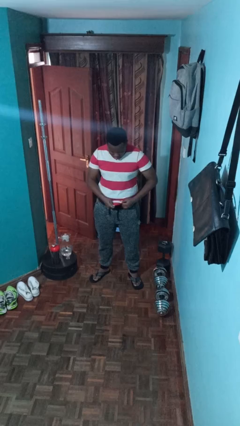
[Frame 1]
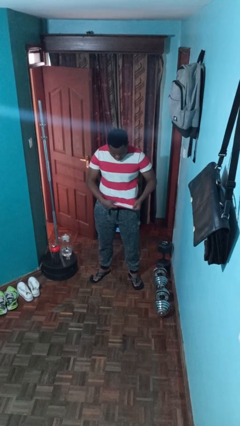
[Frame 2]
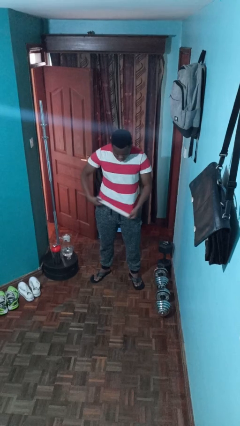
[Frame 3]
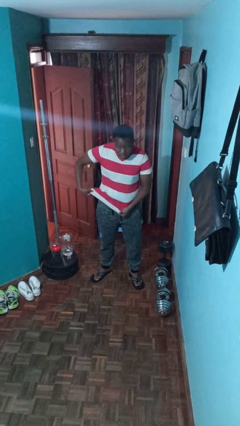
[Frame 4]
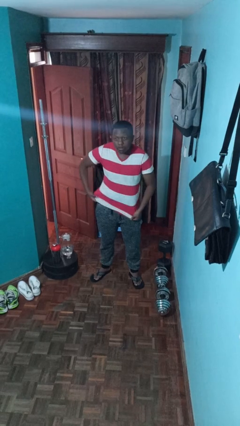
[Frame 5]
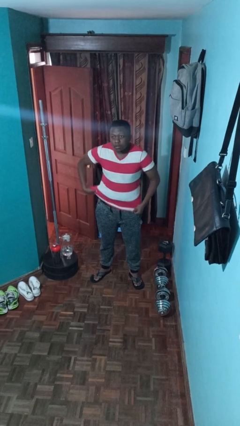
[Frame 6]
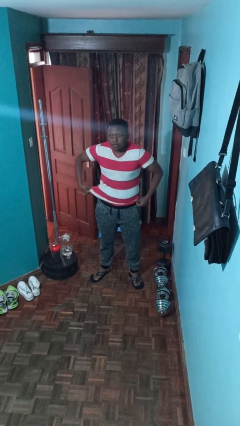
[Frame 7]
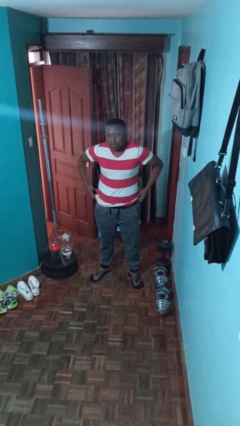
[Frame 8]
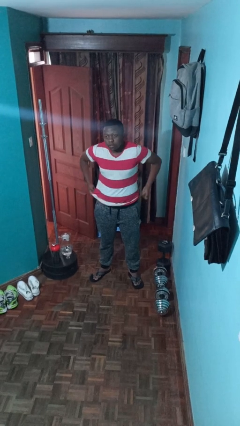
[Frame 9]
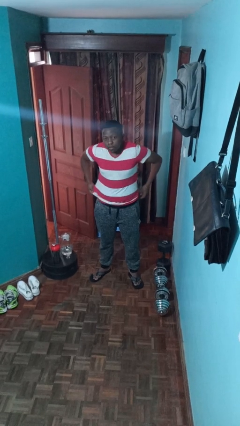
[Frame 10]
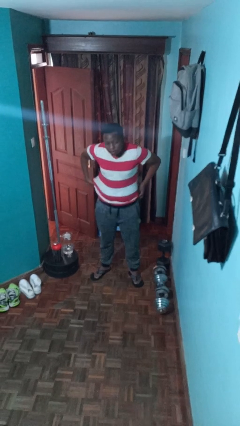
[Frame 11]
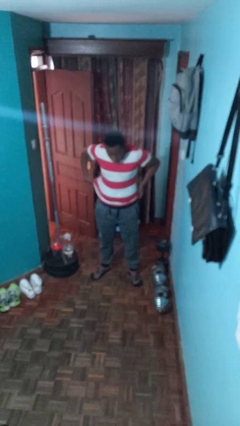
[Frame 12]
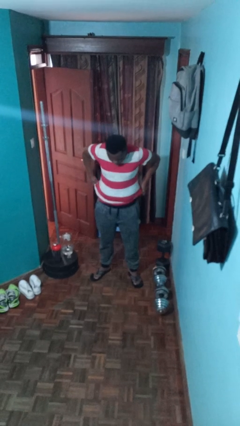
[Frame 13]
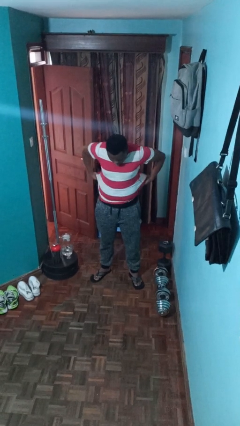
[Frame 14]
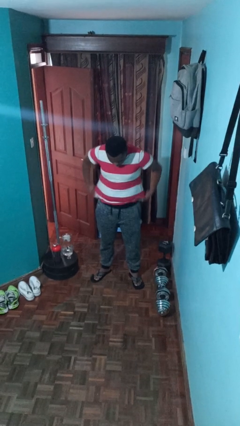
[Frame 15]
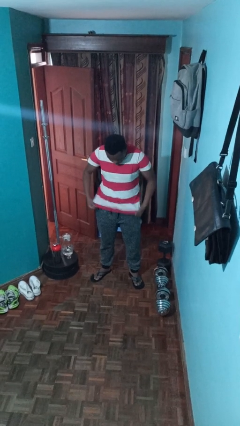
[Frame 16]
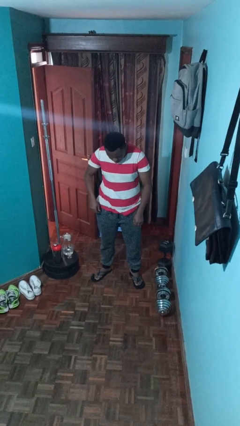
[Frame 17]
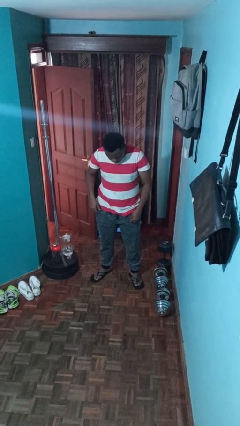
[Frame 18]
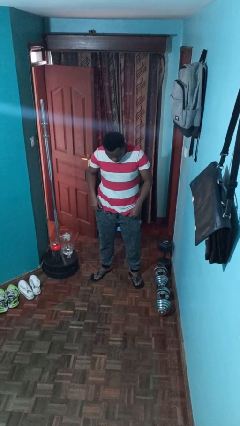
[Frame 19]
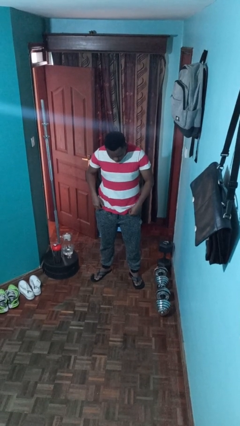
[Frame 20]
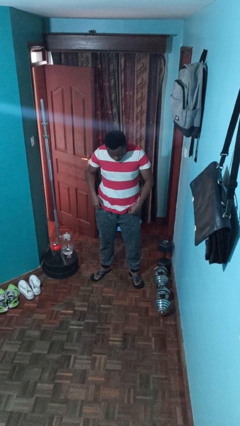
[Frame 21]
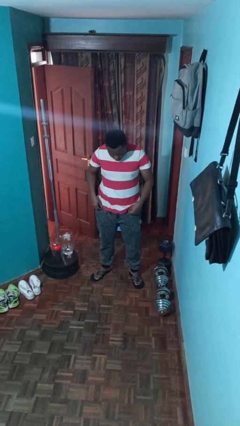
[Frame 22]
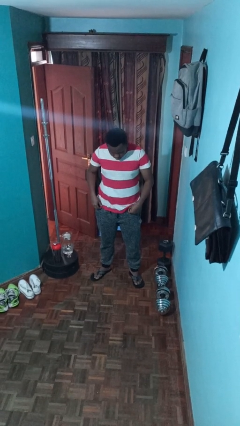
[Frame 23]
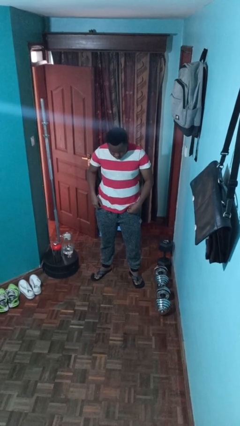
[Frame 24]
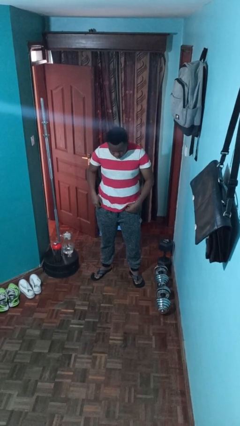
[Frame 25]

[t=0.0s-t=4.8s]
person untucks shirt

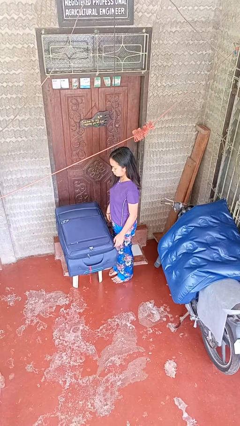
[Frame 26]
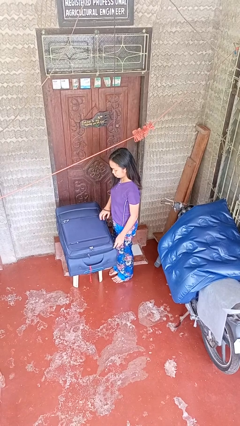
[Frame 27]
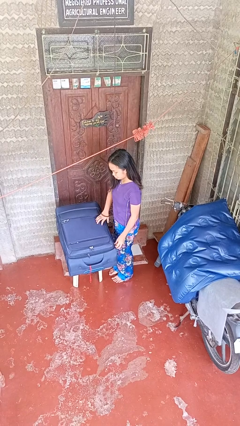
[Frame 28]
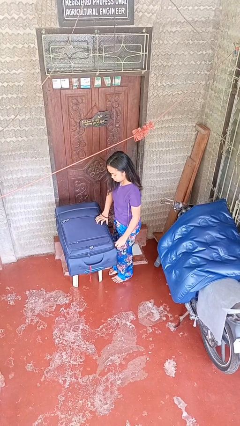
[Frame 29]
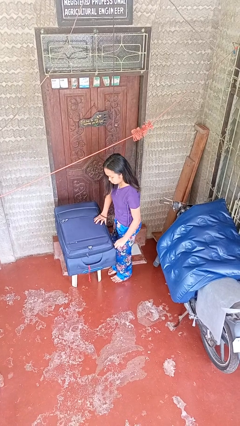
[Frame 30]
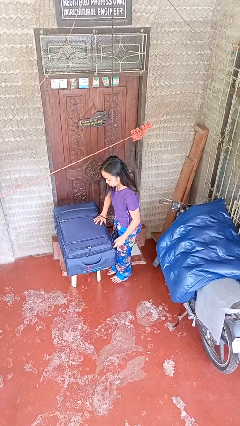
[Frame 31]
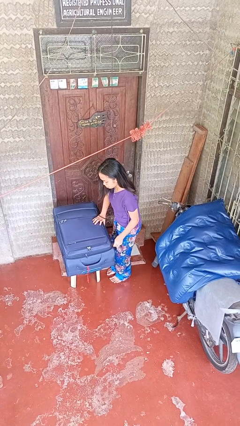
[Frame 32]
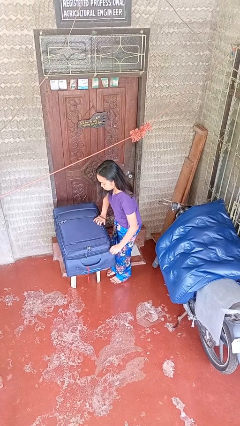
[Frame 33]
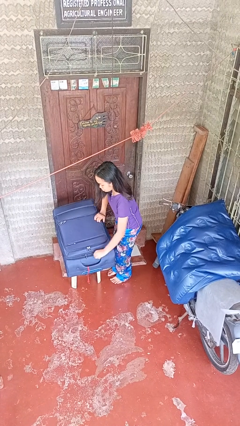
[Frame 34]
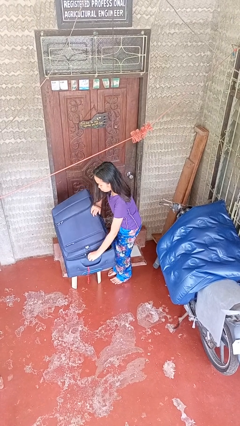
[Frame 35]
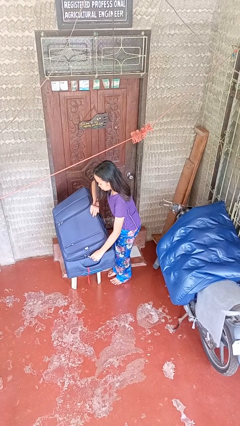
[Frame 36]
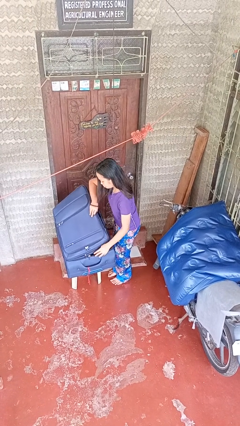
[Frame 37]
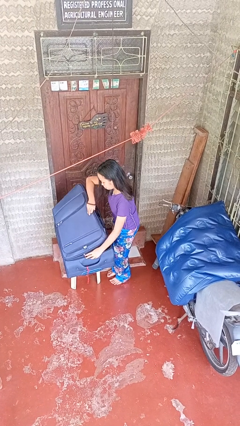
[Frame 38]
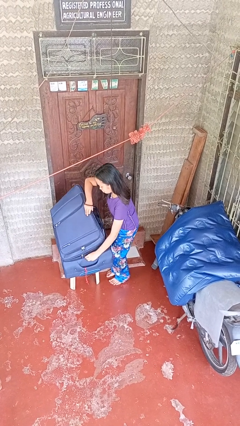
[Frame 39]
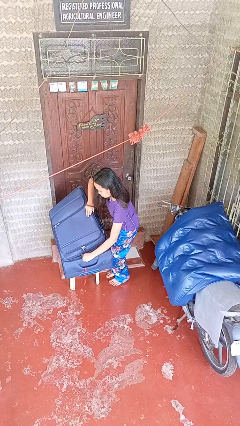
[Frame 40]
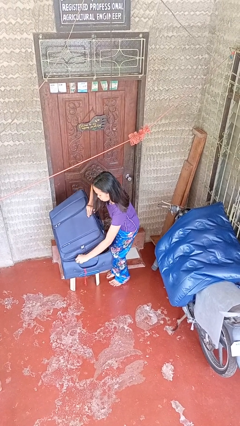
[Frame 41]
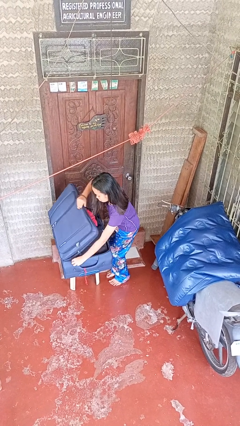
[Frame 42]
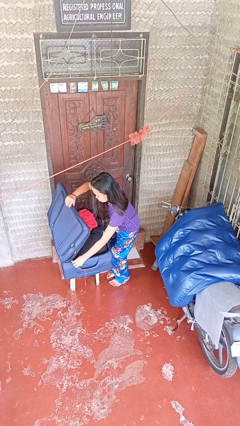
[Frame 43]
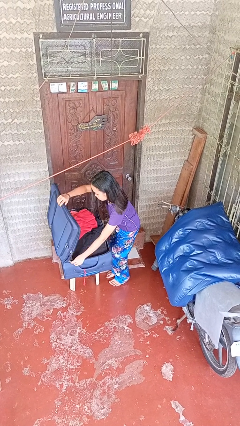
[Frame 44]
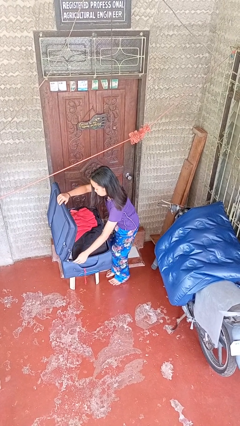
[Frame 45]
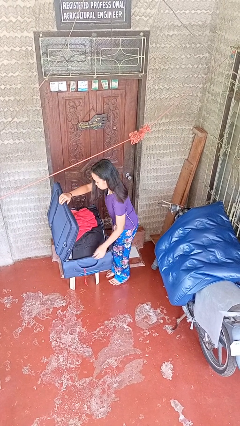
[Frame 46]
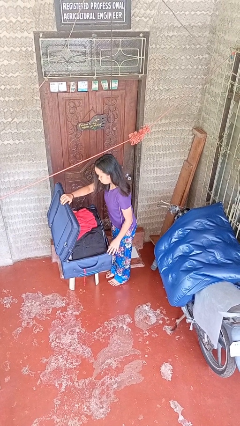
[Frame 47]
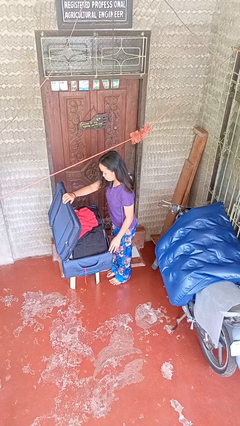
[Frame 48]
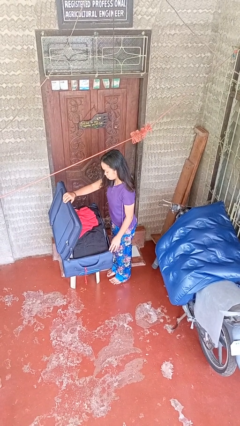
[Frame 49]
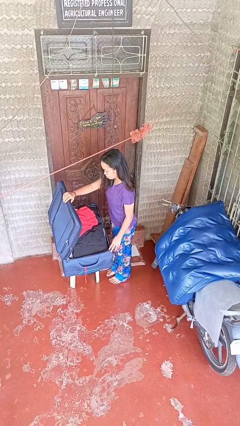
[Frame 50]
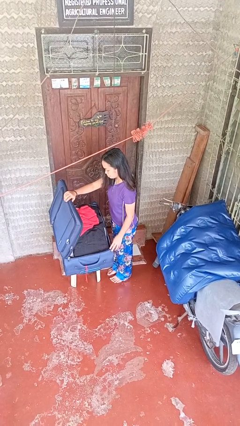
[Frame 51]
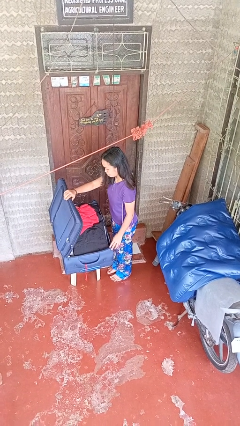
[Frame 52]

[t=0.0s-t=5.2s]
person opens suitcase

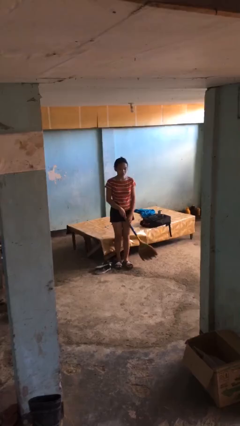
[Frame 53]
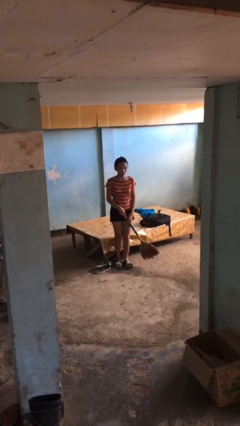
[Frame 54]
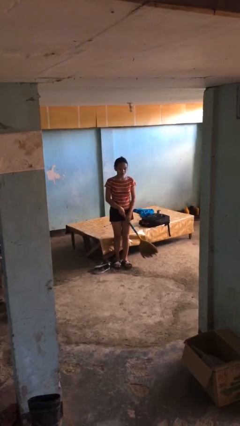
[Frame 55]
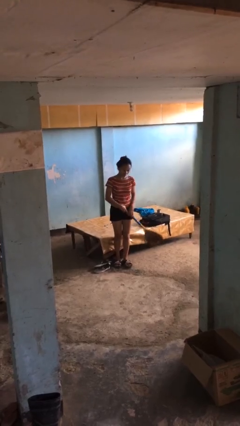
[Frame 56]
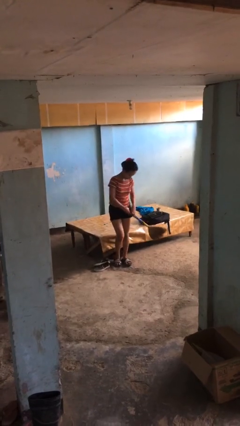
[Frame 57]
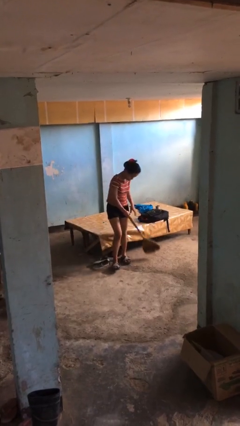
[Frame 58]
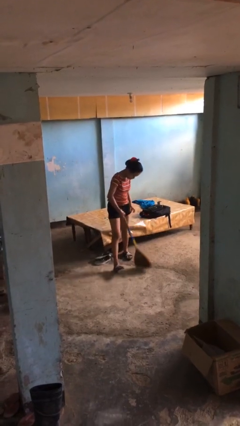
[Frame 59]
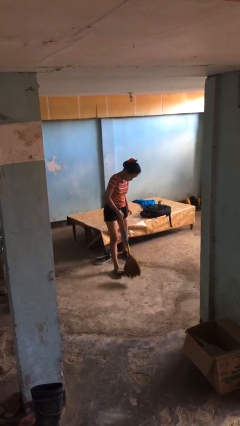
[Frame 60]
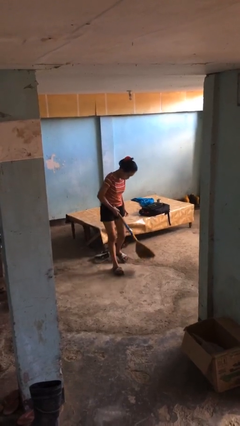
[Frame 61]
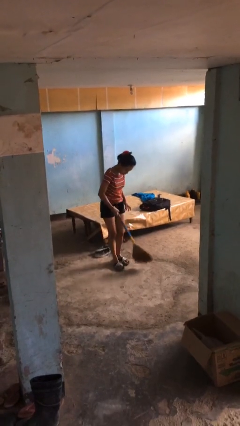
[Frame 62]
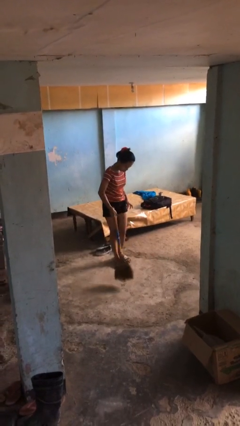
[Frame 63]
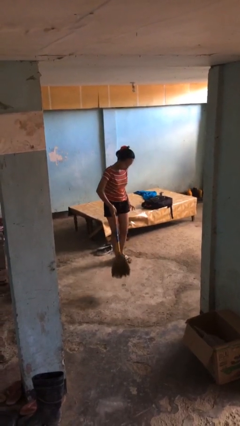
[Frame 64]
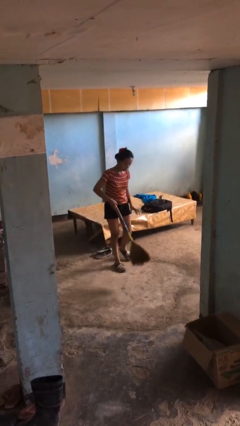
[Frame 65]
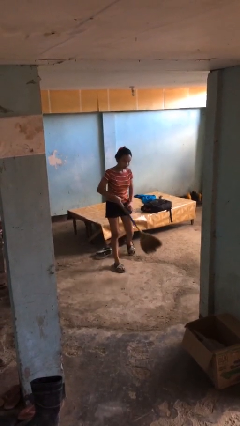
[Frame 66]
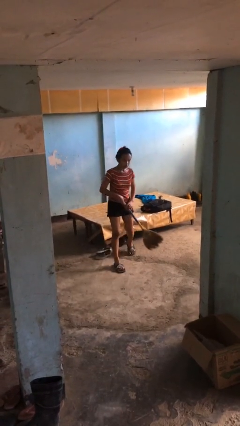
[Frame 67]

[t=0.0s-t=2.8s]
person sweeps floor

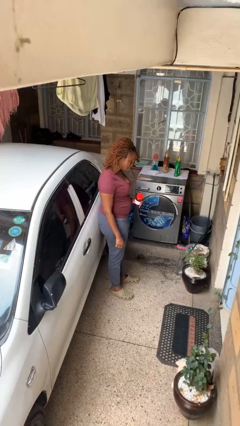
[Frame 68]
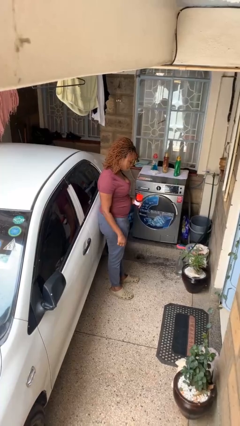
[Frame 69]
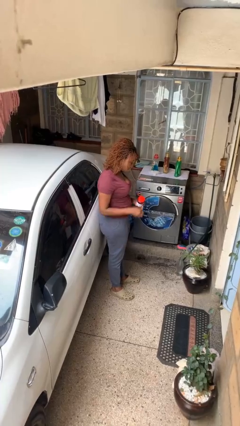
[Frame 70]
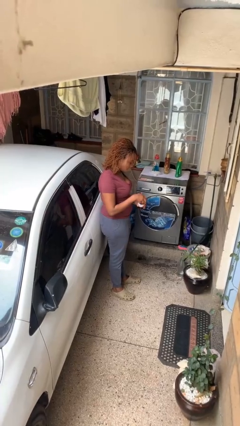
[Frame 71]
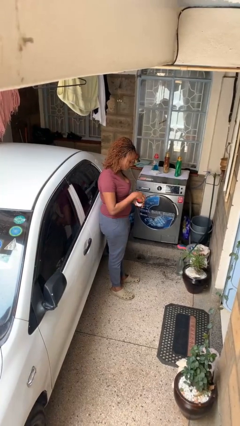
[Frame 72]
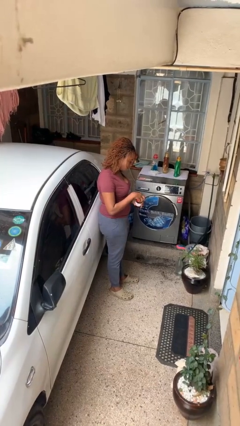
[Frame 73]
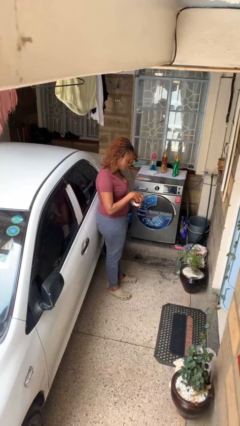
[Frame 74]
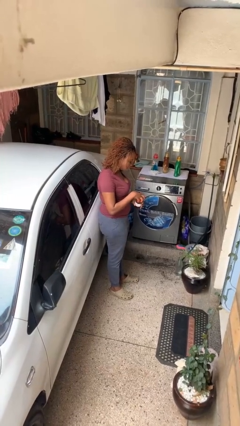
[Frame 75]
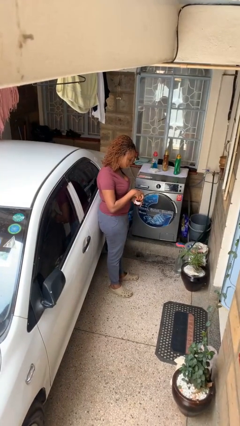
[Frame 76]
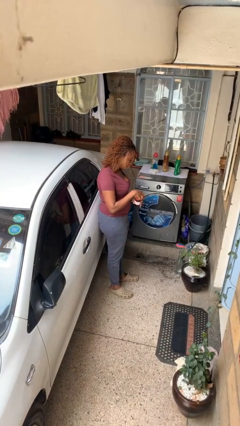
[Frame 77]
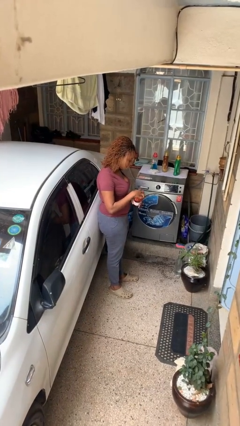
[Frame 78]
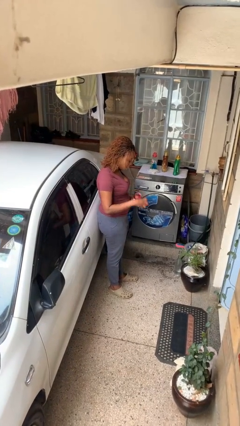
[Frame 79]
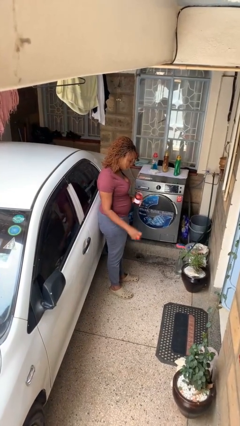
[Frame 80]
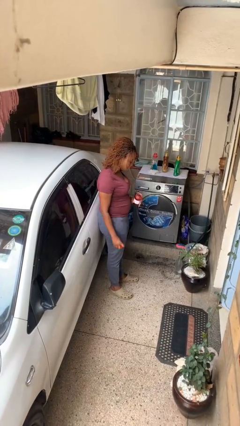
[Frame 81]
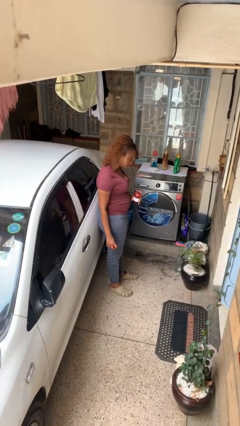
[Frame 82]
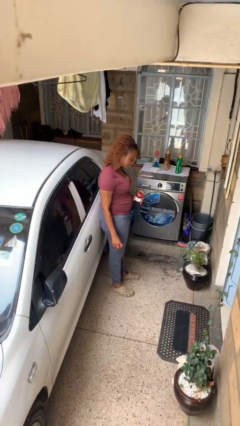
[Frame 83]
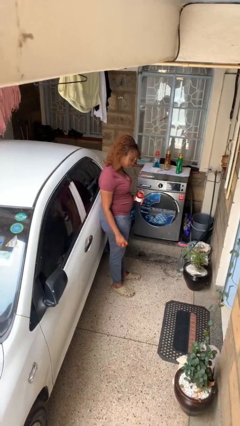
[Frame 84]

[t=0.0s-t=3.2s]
person opens jar

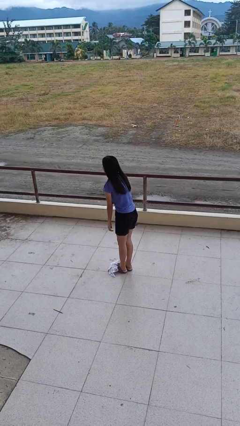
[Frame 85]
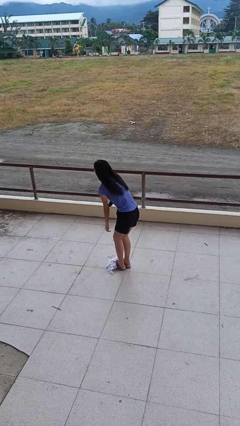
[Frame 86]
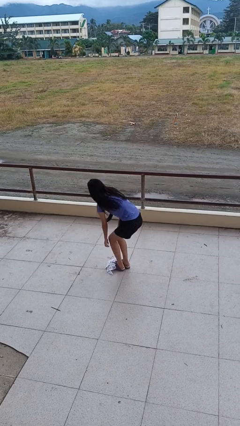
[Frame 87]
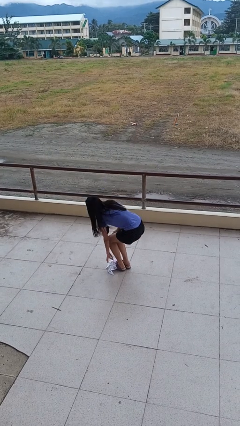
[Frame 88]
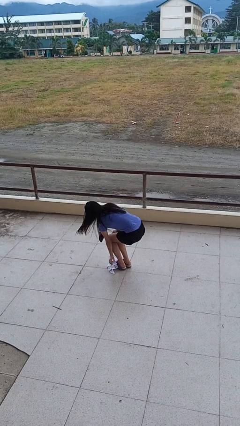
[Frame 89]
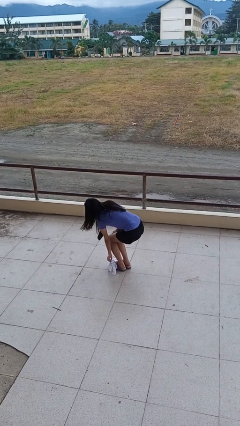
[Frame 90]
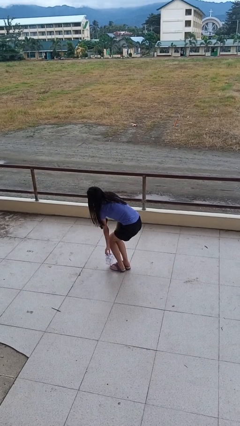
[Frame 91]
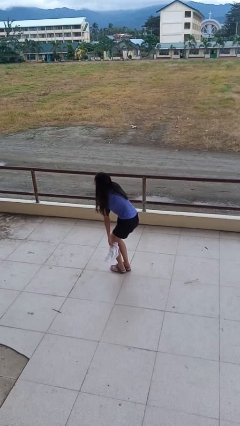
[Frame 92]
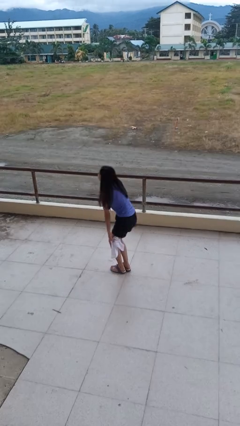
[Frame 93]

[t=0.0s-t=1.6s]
person picks up object from floor
